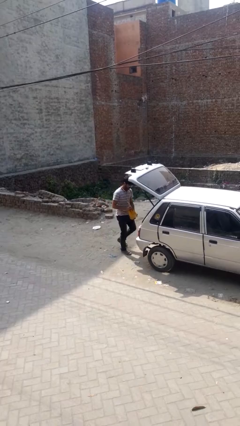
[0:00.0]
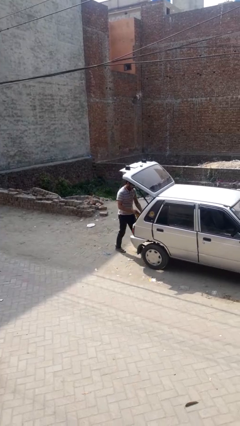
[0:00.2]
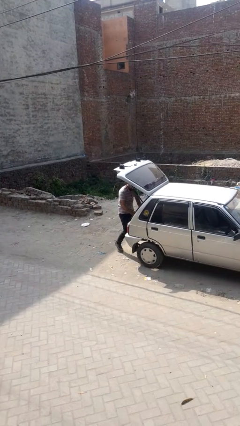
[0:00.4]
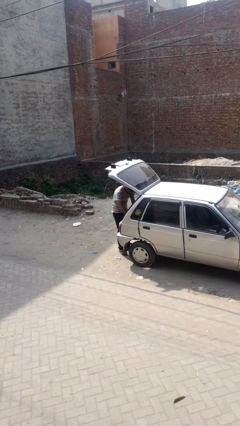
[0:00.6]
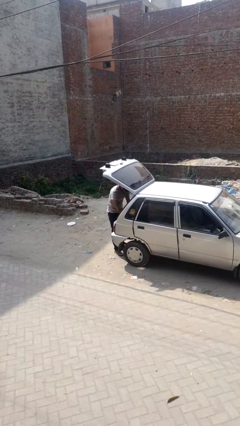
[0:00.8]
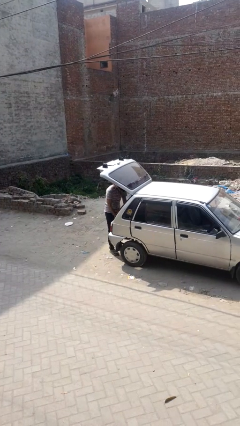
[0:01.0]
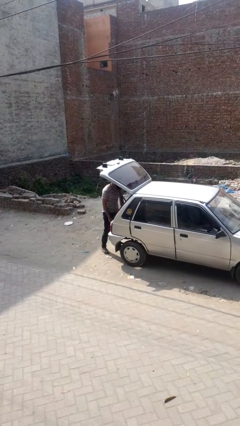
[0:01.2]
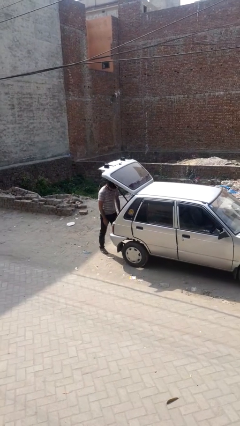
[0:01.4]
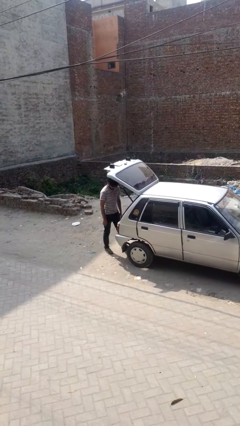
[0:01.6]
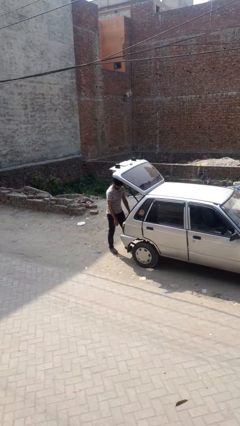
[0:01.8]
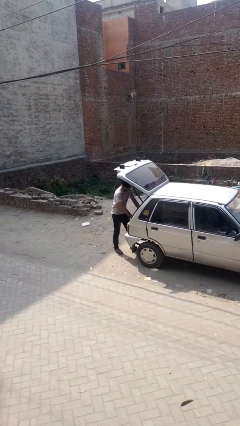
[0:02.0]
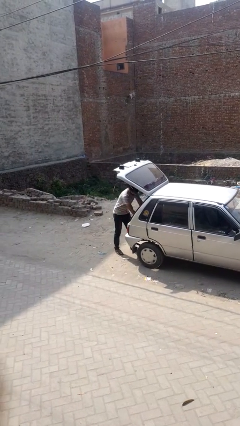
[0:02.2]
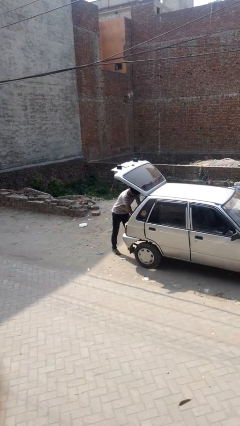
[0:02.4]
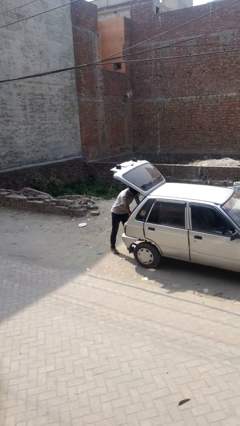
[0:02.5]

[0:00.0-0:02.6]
person loads car

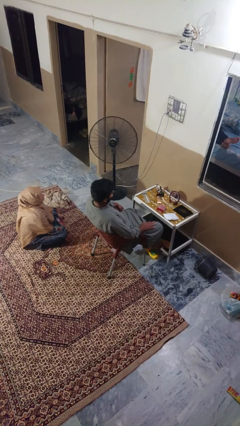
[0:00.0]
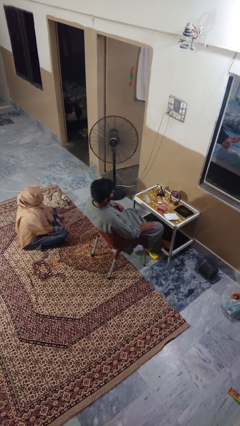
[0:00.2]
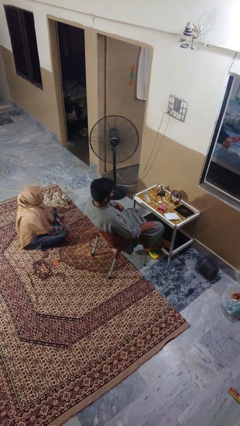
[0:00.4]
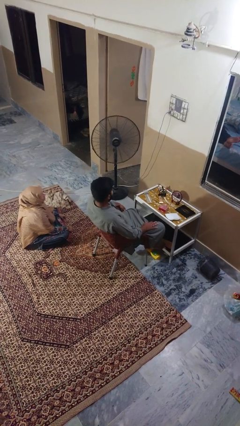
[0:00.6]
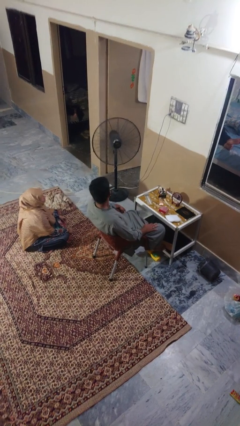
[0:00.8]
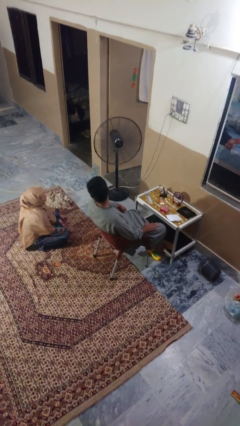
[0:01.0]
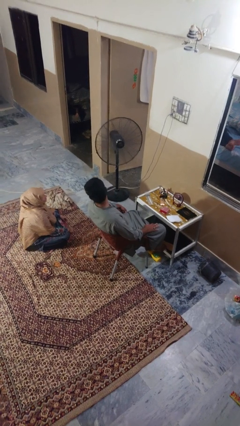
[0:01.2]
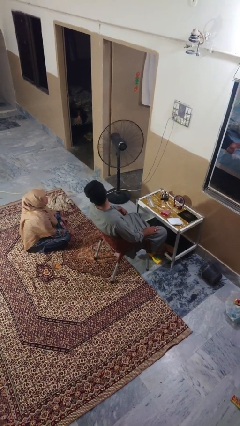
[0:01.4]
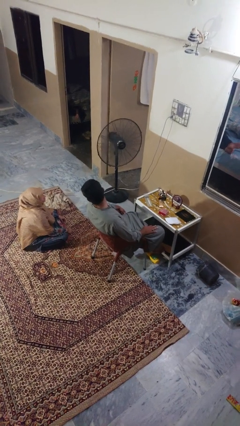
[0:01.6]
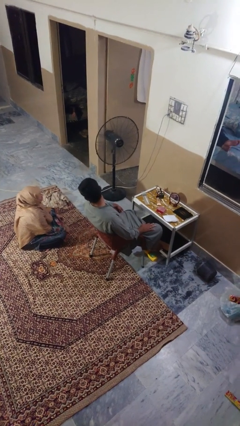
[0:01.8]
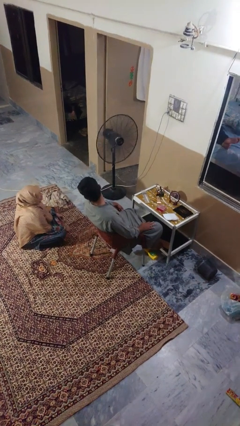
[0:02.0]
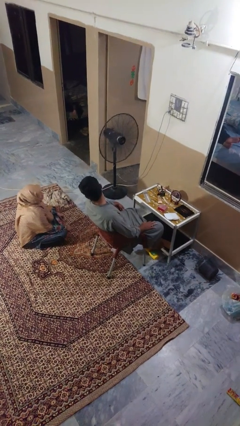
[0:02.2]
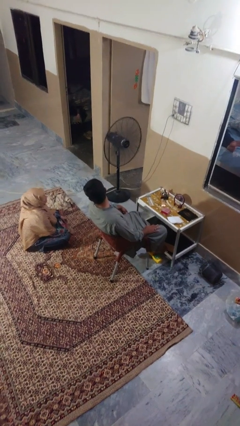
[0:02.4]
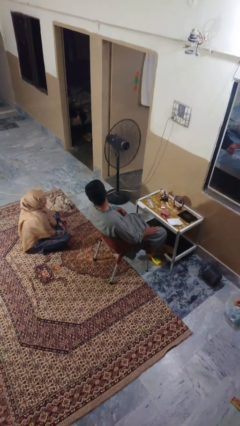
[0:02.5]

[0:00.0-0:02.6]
person looks over shoulder

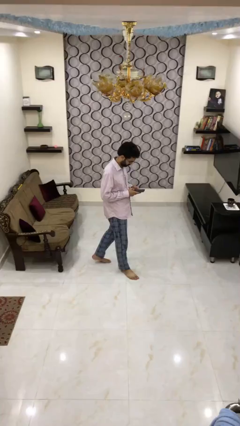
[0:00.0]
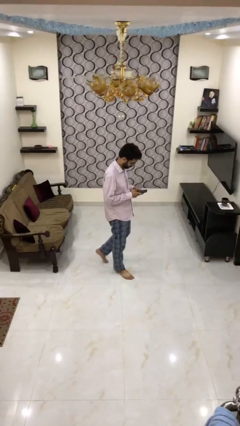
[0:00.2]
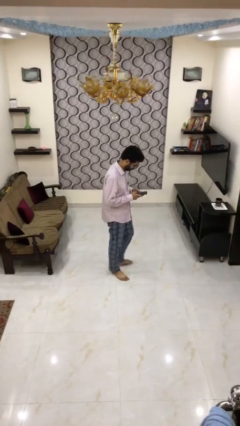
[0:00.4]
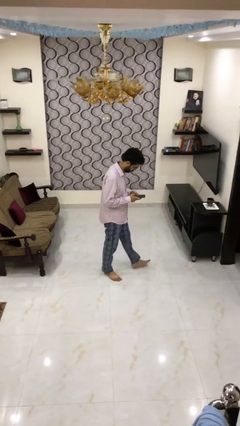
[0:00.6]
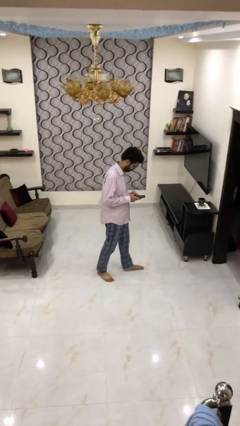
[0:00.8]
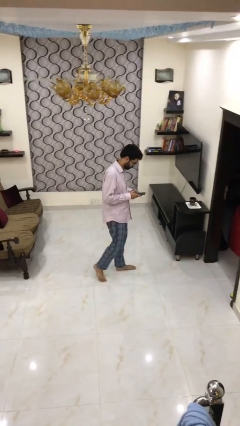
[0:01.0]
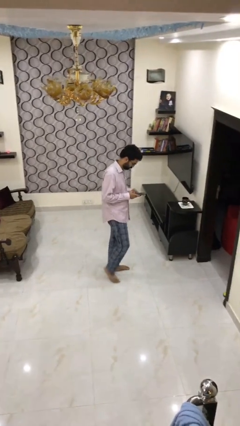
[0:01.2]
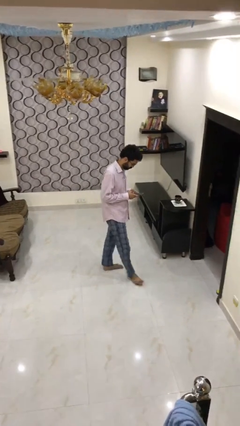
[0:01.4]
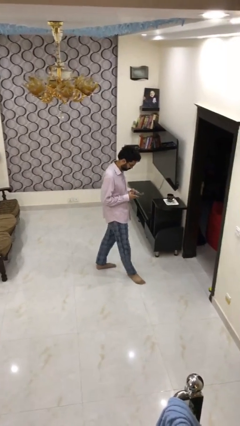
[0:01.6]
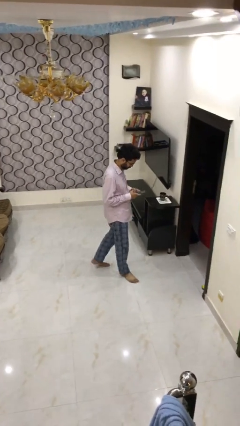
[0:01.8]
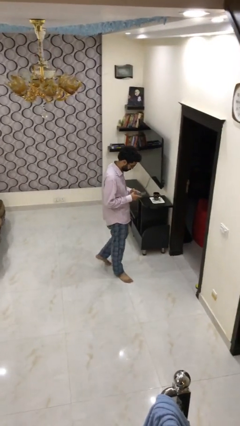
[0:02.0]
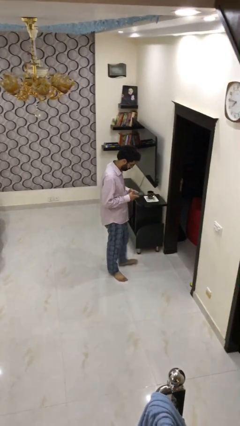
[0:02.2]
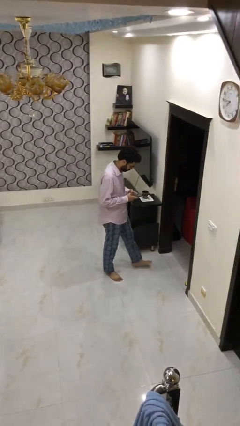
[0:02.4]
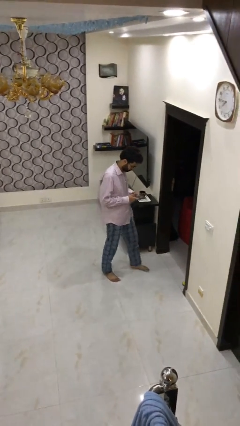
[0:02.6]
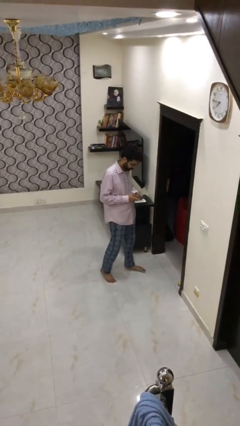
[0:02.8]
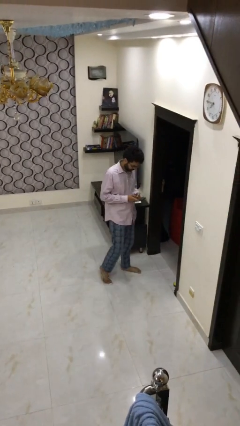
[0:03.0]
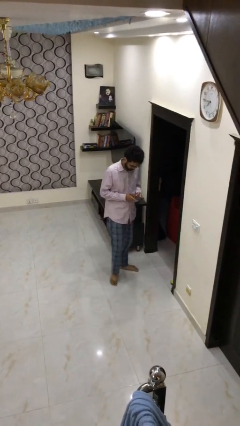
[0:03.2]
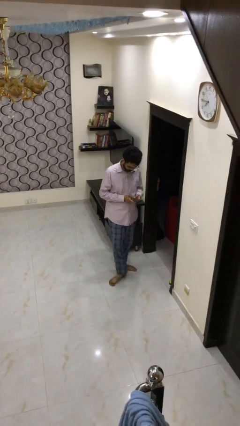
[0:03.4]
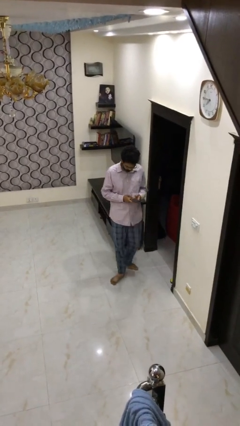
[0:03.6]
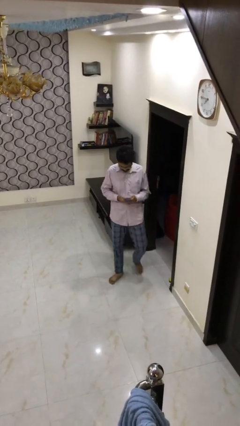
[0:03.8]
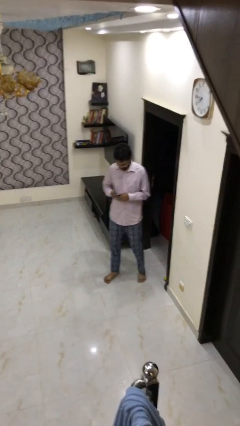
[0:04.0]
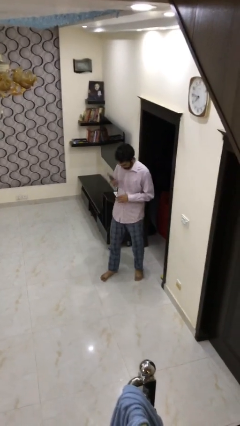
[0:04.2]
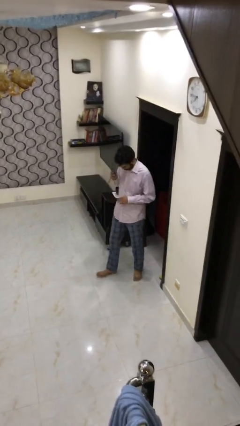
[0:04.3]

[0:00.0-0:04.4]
person texts on phone

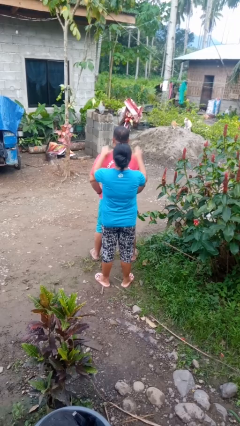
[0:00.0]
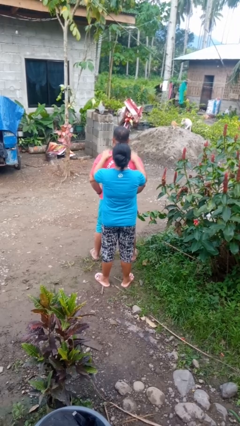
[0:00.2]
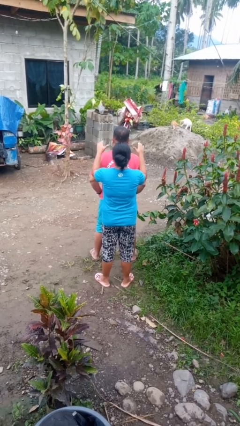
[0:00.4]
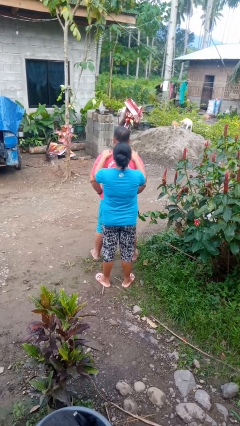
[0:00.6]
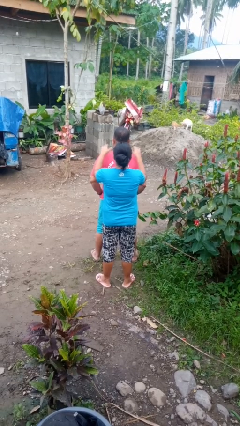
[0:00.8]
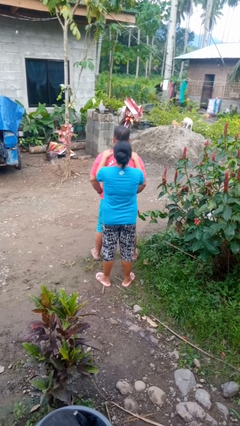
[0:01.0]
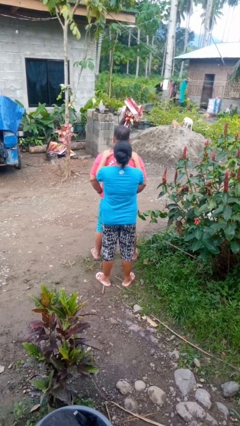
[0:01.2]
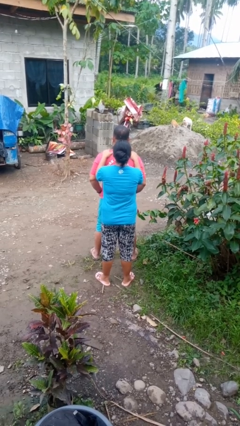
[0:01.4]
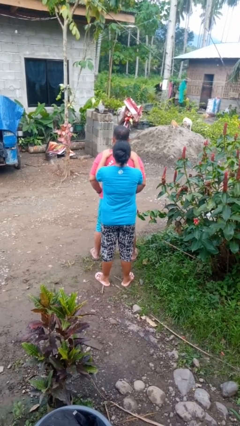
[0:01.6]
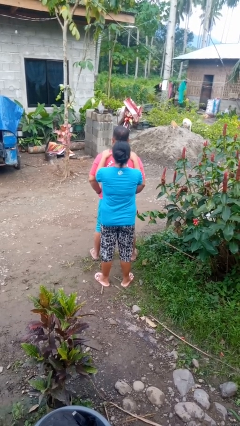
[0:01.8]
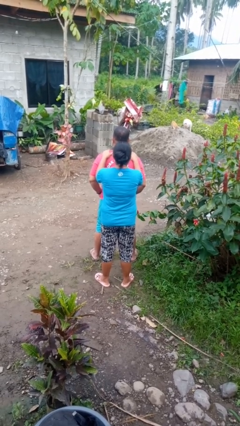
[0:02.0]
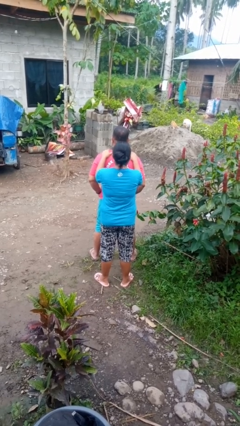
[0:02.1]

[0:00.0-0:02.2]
person pounds shoulders of person

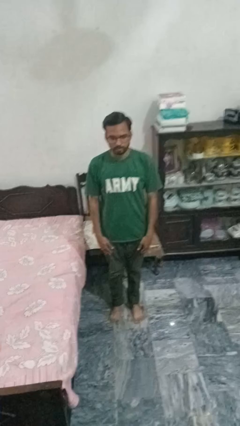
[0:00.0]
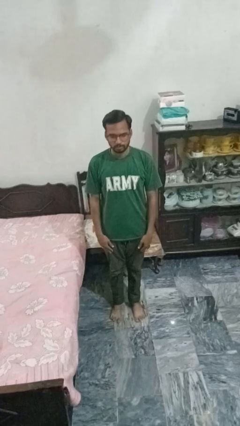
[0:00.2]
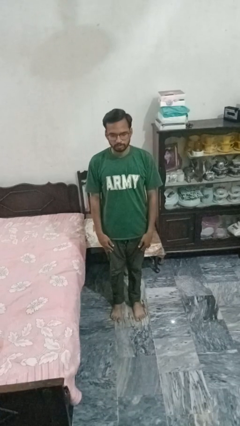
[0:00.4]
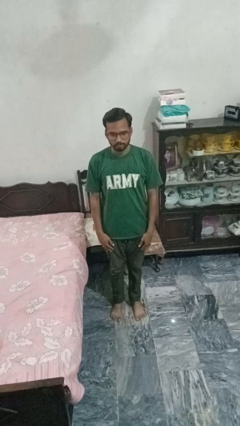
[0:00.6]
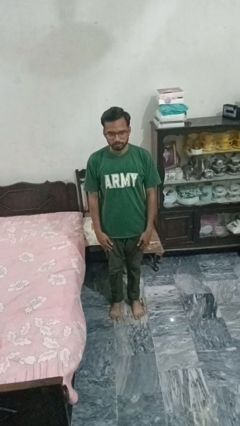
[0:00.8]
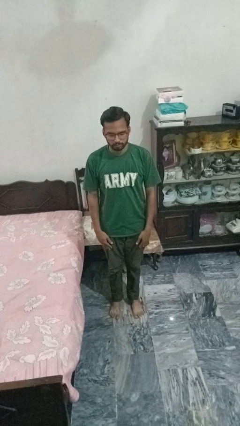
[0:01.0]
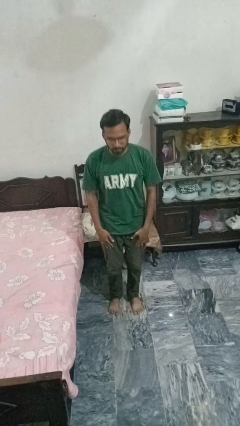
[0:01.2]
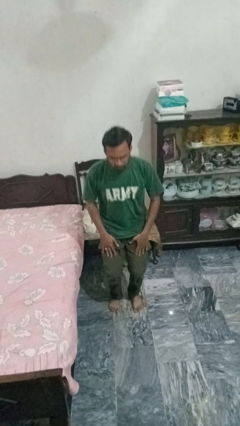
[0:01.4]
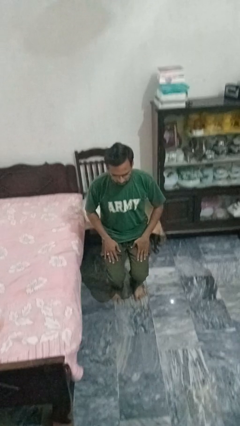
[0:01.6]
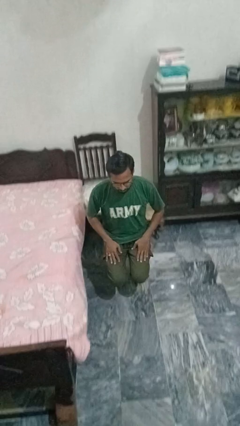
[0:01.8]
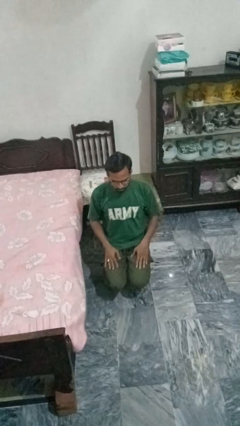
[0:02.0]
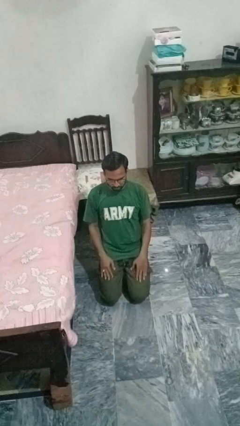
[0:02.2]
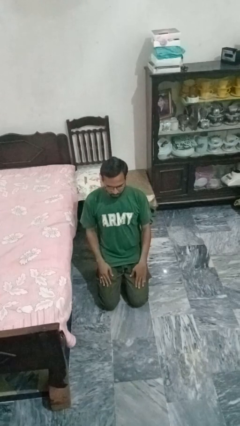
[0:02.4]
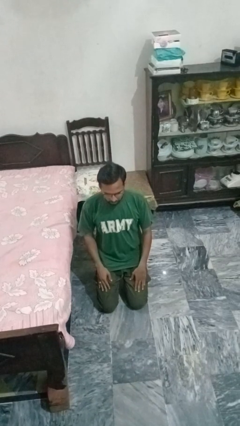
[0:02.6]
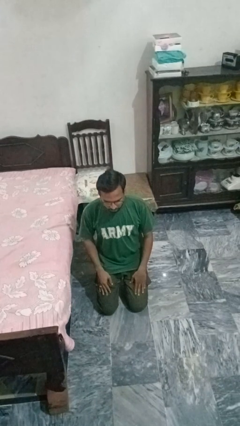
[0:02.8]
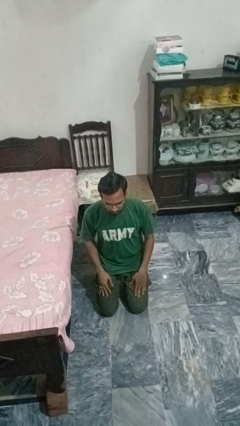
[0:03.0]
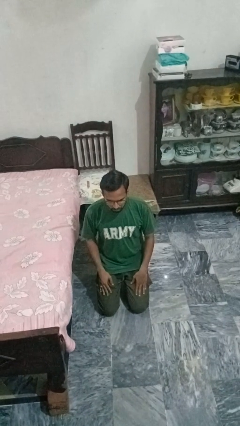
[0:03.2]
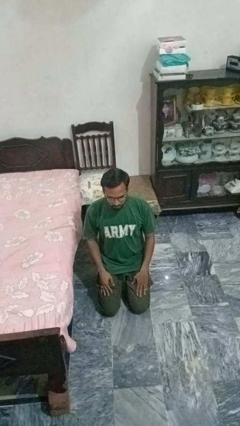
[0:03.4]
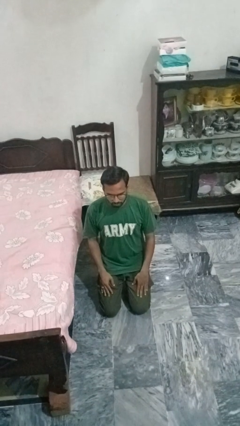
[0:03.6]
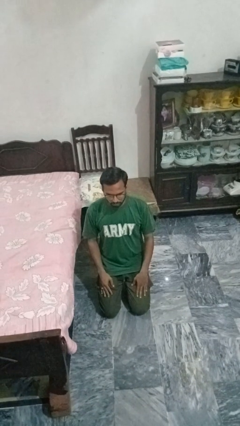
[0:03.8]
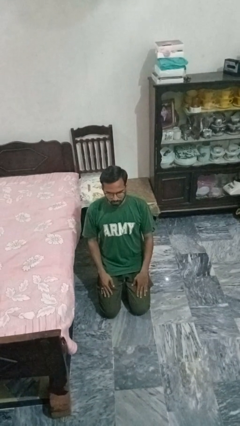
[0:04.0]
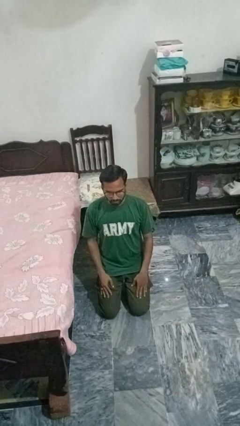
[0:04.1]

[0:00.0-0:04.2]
person kneels

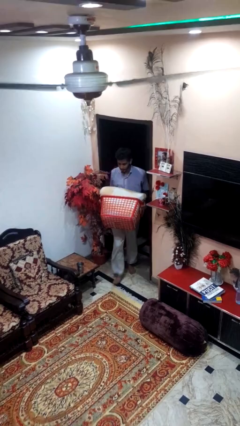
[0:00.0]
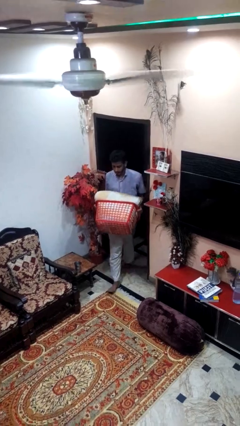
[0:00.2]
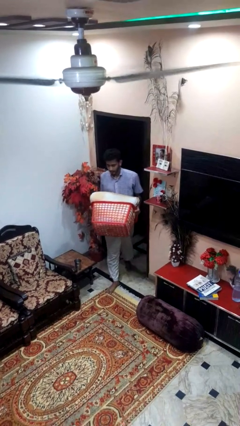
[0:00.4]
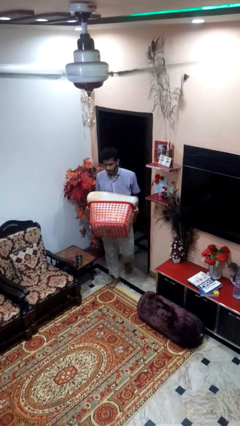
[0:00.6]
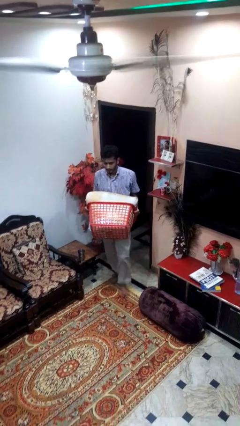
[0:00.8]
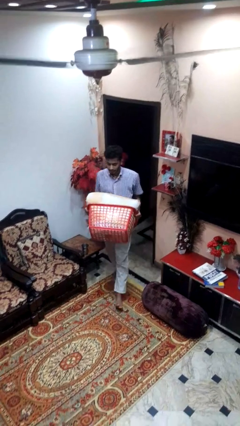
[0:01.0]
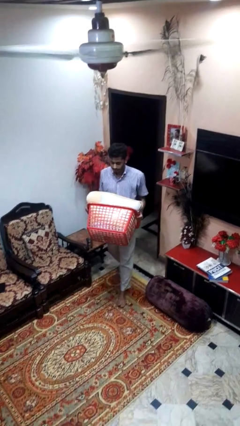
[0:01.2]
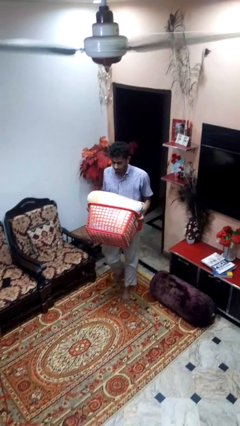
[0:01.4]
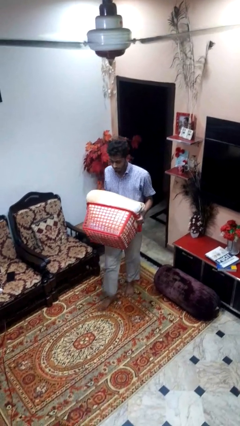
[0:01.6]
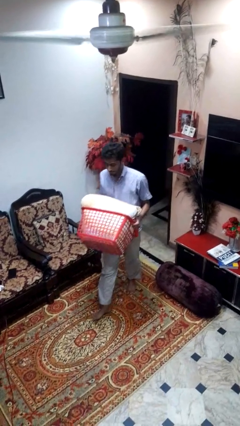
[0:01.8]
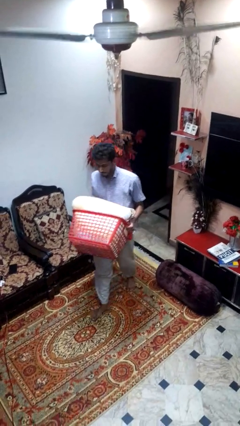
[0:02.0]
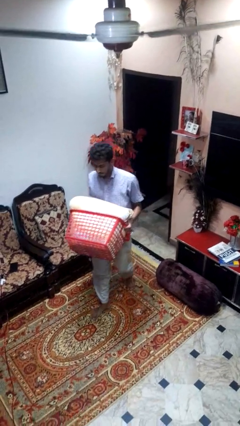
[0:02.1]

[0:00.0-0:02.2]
person carries laundry basket
